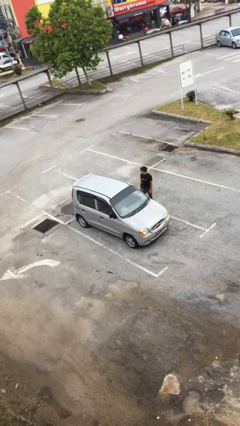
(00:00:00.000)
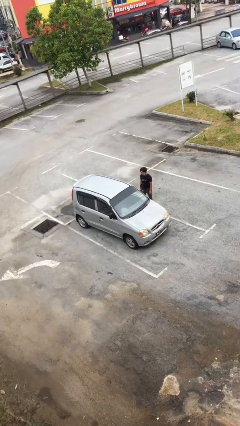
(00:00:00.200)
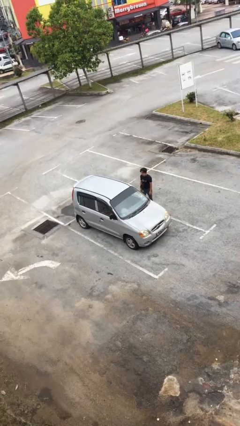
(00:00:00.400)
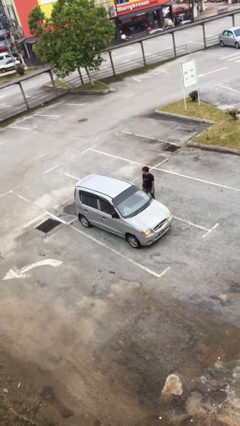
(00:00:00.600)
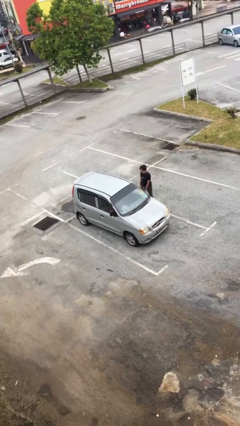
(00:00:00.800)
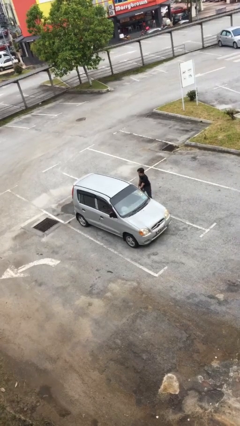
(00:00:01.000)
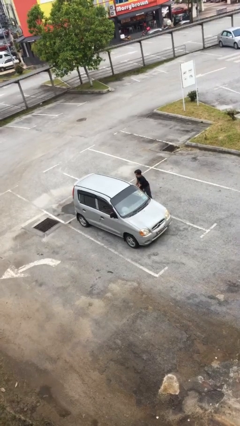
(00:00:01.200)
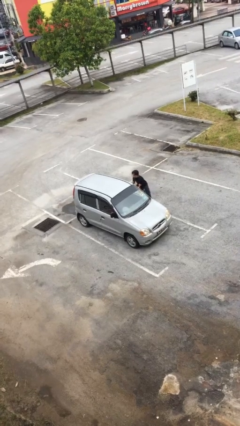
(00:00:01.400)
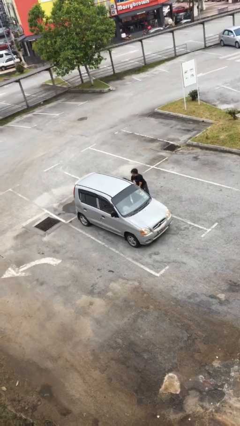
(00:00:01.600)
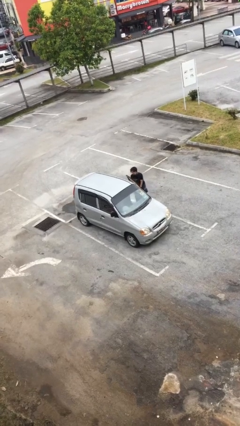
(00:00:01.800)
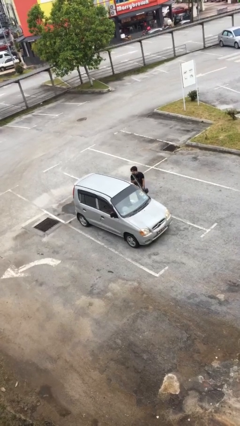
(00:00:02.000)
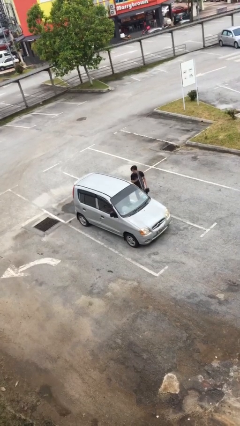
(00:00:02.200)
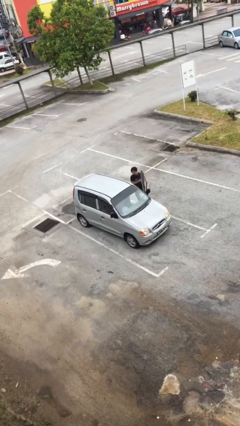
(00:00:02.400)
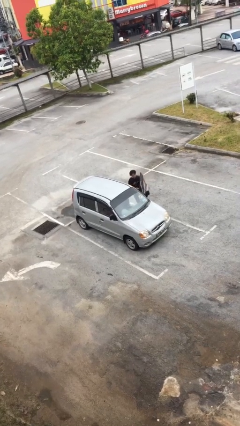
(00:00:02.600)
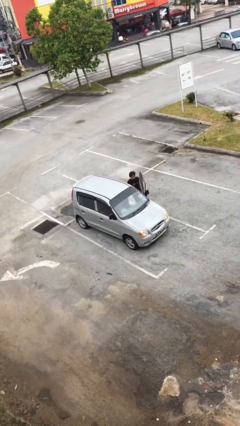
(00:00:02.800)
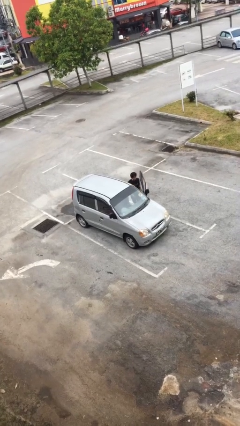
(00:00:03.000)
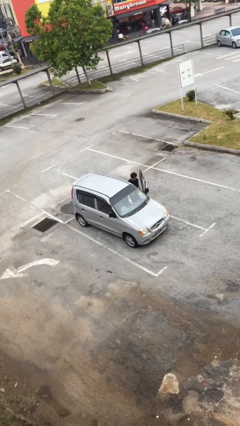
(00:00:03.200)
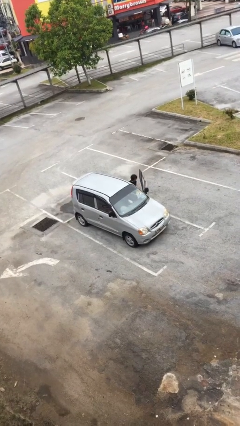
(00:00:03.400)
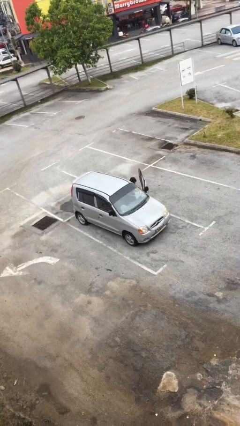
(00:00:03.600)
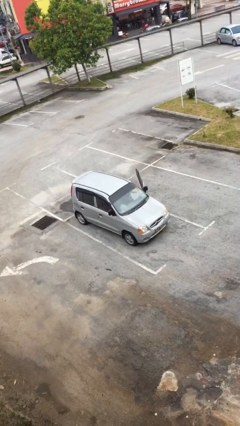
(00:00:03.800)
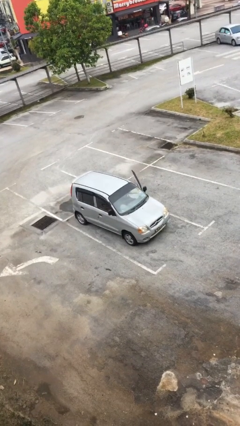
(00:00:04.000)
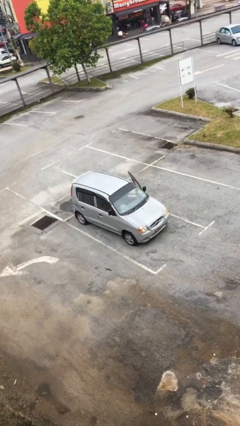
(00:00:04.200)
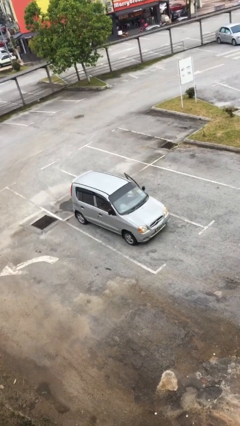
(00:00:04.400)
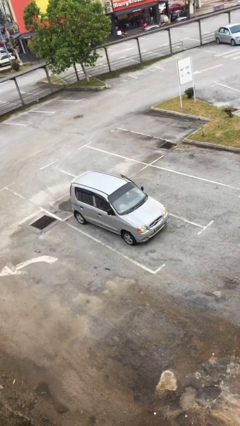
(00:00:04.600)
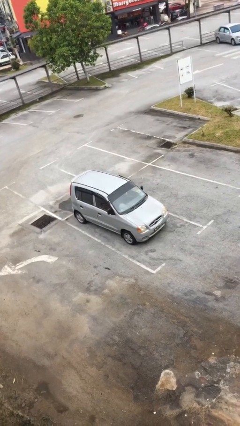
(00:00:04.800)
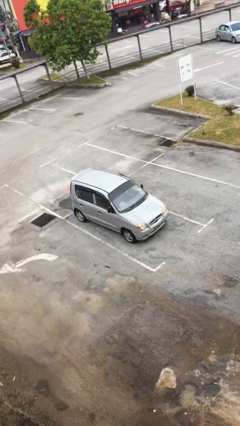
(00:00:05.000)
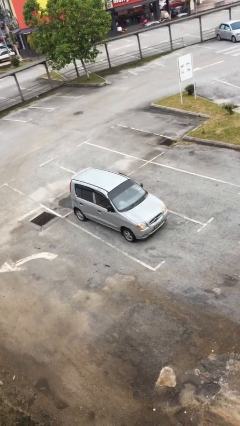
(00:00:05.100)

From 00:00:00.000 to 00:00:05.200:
car picks up person

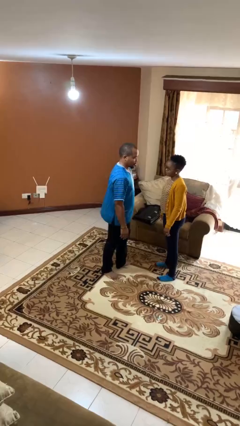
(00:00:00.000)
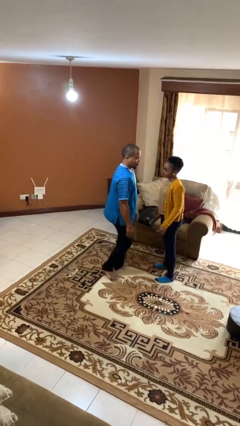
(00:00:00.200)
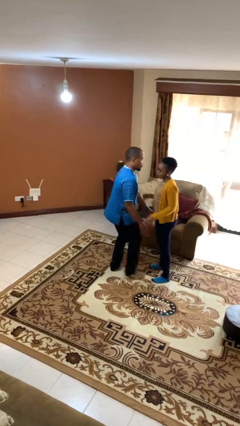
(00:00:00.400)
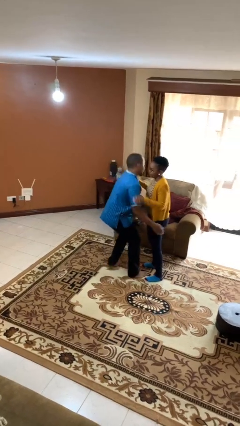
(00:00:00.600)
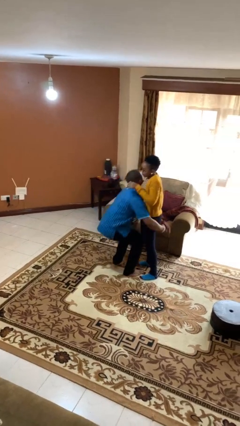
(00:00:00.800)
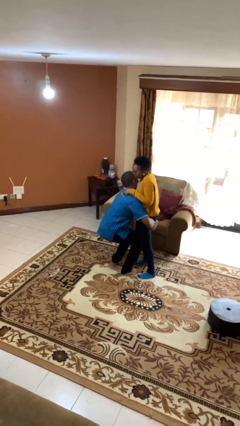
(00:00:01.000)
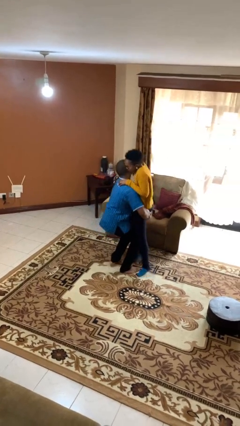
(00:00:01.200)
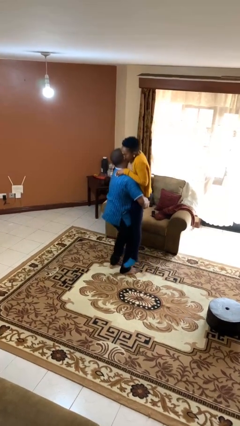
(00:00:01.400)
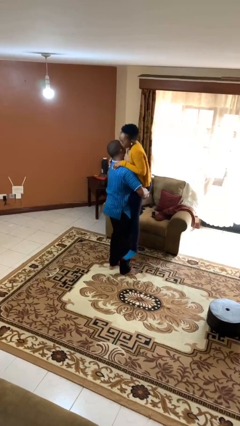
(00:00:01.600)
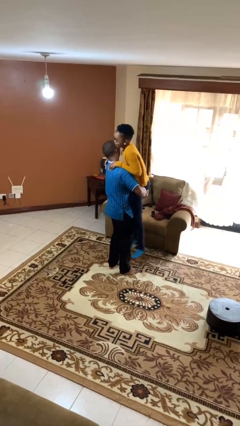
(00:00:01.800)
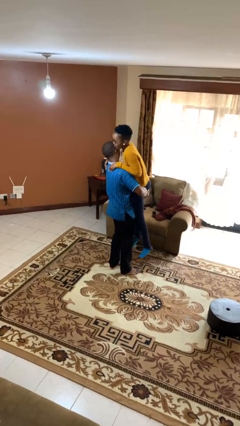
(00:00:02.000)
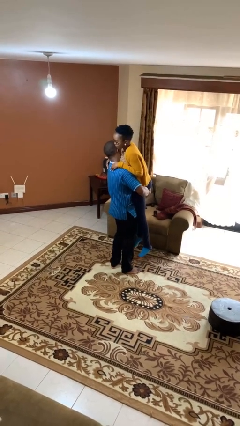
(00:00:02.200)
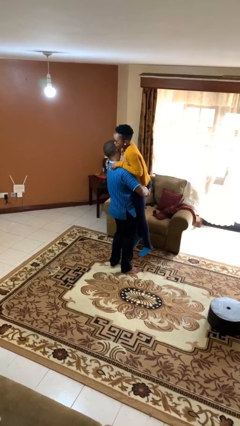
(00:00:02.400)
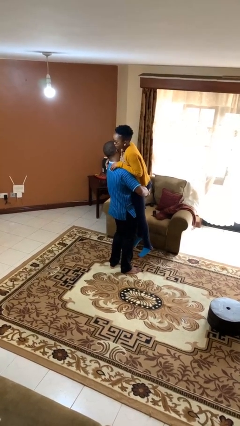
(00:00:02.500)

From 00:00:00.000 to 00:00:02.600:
person picks up person

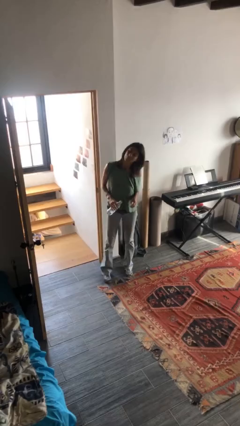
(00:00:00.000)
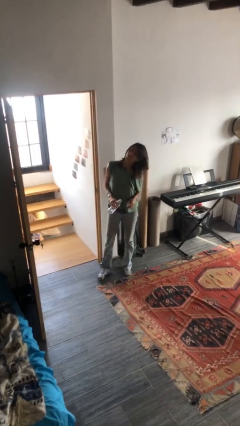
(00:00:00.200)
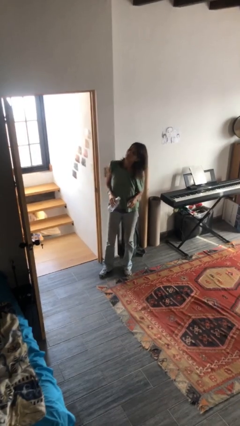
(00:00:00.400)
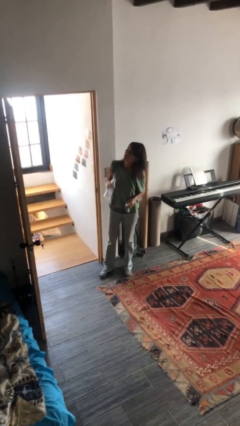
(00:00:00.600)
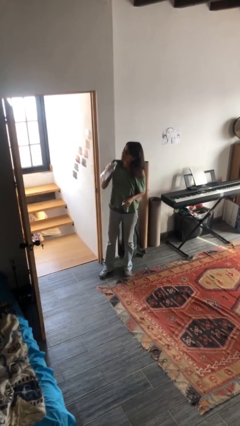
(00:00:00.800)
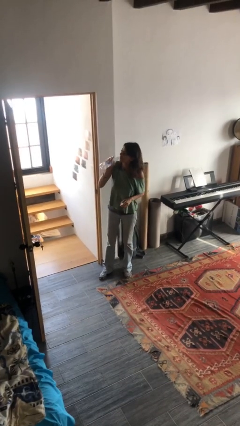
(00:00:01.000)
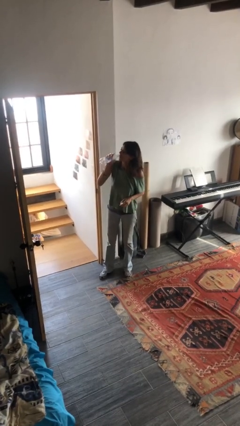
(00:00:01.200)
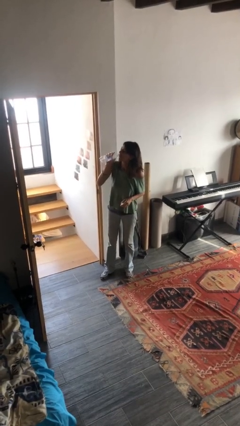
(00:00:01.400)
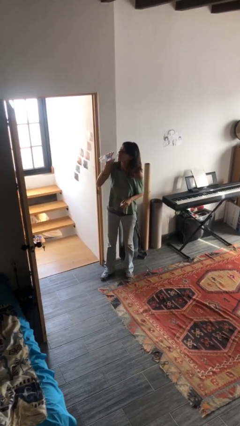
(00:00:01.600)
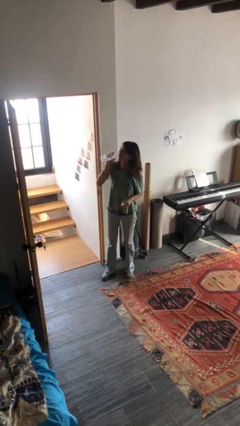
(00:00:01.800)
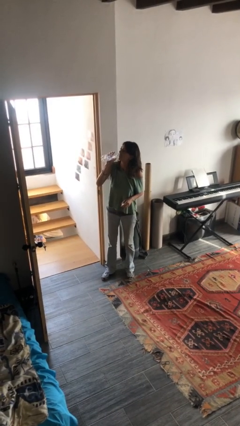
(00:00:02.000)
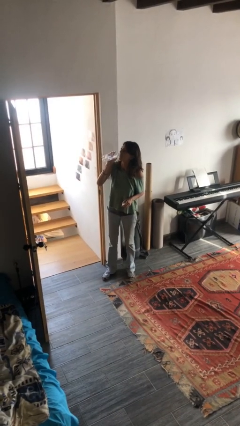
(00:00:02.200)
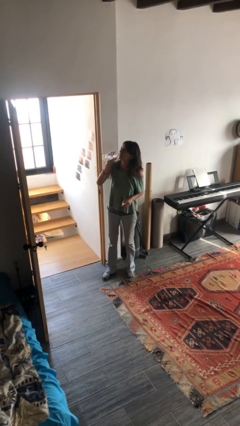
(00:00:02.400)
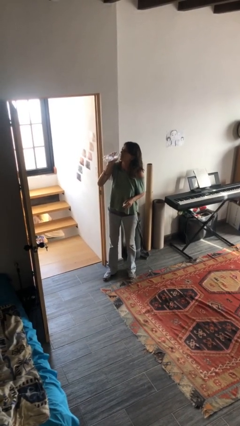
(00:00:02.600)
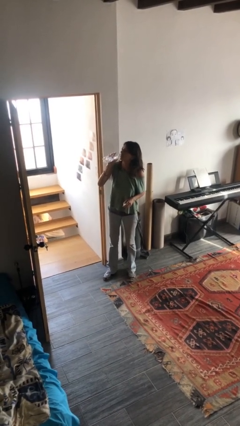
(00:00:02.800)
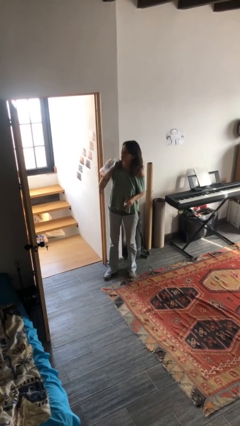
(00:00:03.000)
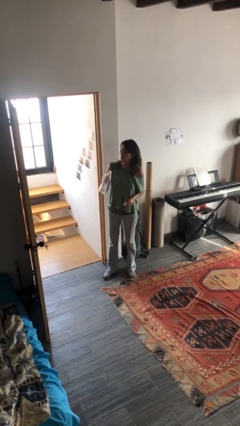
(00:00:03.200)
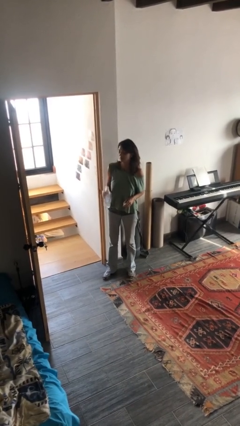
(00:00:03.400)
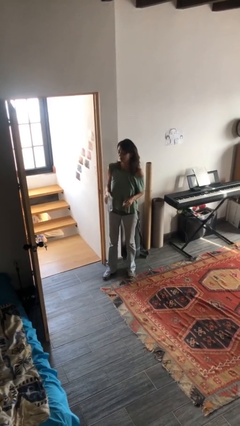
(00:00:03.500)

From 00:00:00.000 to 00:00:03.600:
person drinks from bottle

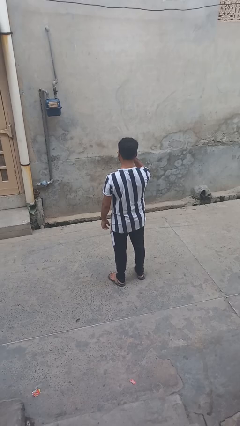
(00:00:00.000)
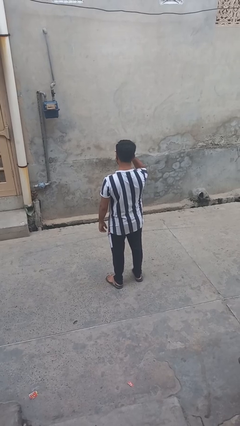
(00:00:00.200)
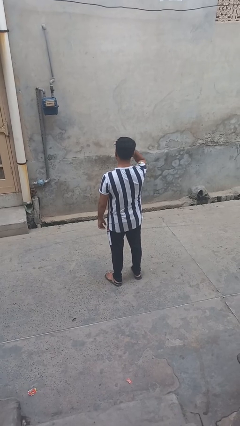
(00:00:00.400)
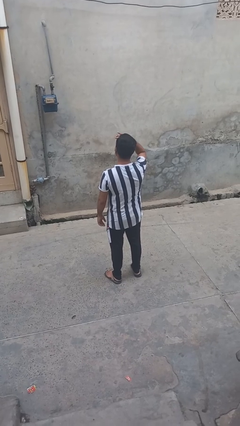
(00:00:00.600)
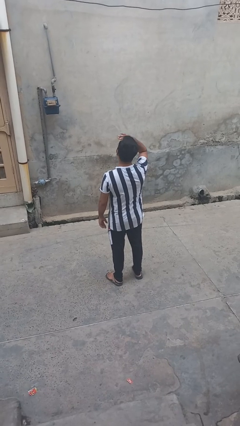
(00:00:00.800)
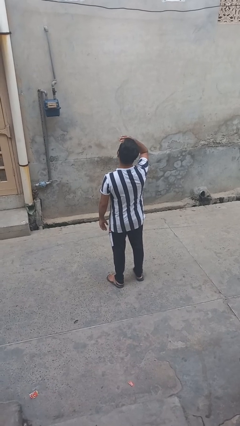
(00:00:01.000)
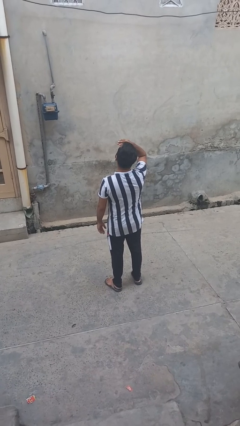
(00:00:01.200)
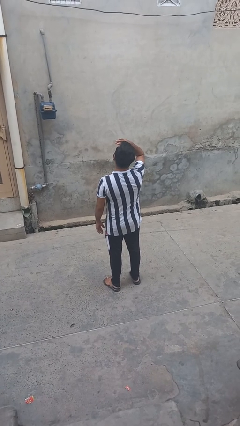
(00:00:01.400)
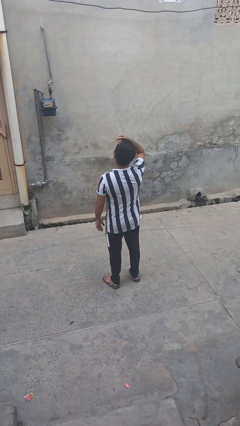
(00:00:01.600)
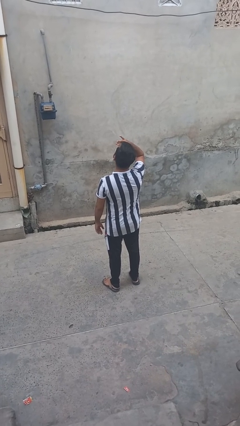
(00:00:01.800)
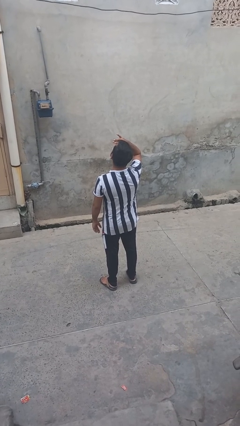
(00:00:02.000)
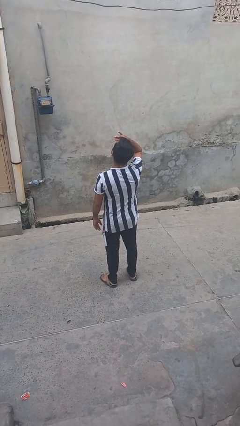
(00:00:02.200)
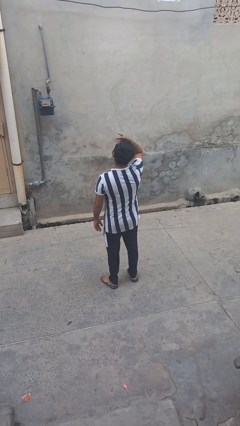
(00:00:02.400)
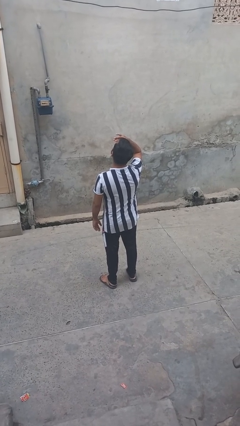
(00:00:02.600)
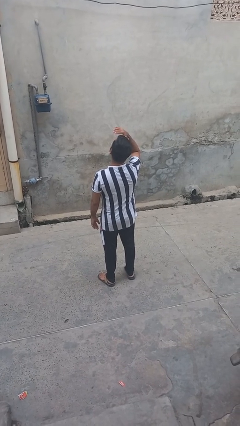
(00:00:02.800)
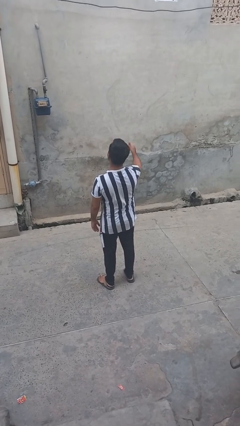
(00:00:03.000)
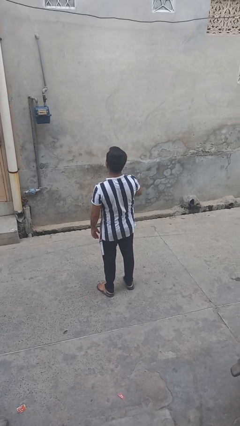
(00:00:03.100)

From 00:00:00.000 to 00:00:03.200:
person shades eyes

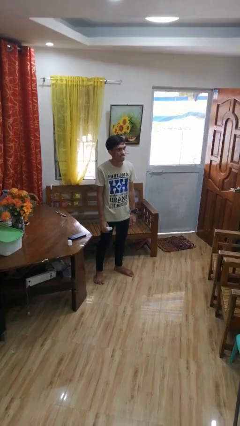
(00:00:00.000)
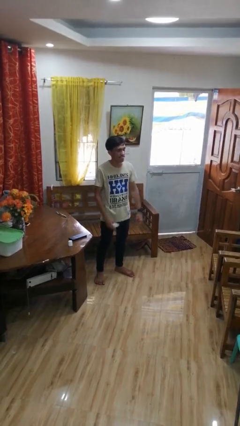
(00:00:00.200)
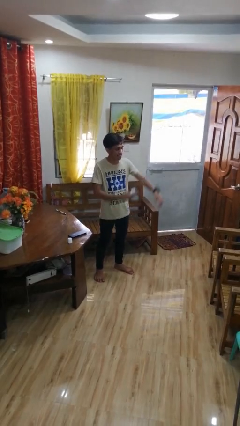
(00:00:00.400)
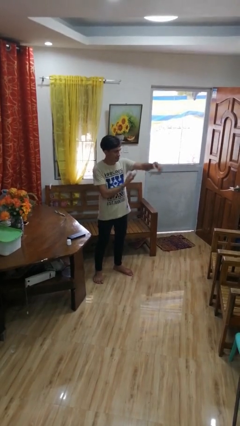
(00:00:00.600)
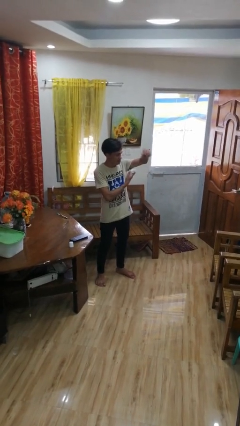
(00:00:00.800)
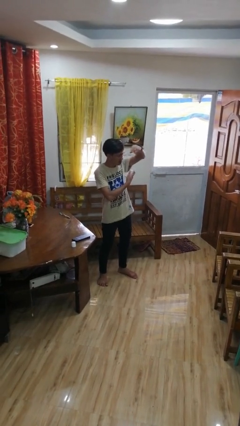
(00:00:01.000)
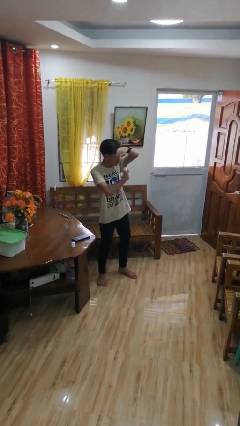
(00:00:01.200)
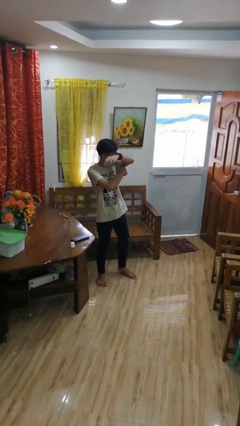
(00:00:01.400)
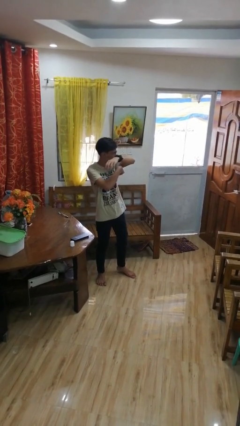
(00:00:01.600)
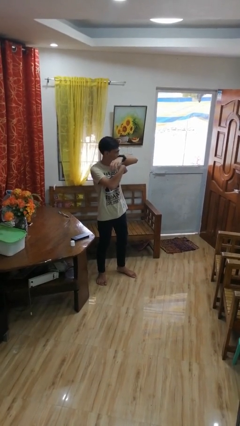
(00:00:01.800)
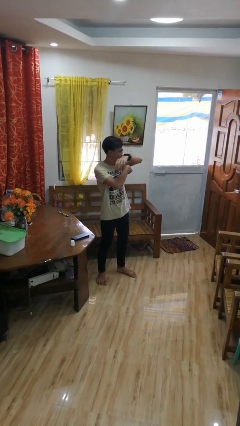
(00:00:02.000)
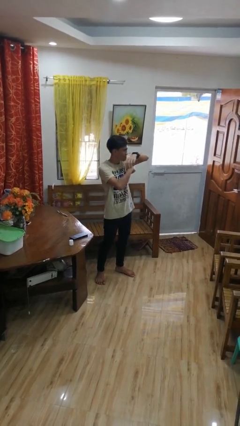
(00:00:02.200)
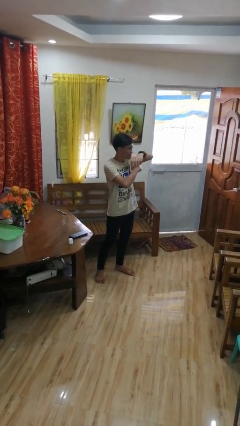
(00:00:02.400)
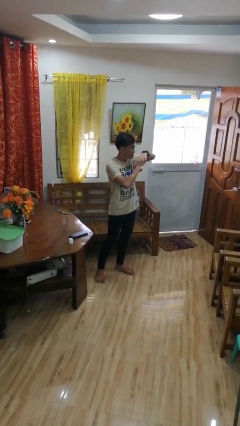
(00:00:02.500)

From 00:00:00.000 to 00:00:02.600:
person applies deodorant
